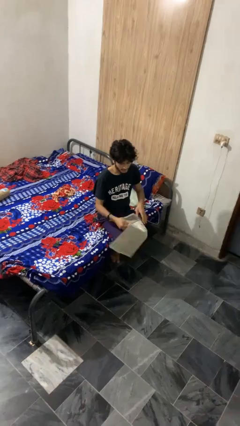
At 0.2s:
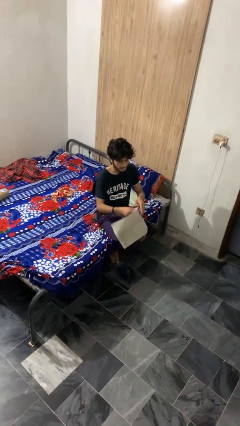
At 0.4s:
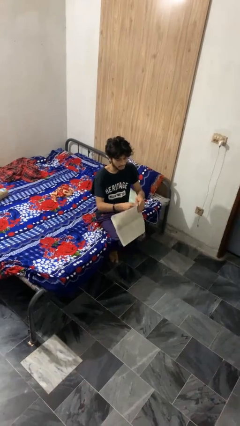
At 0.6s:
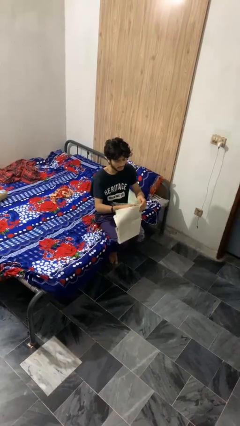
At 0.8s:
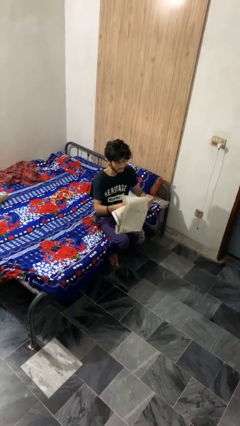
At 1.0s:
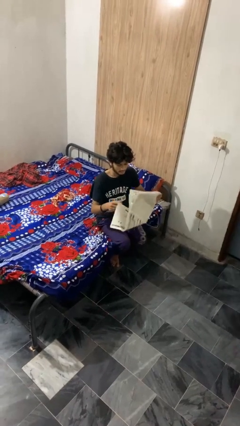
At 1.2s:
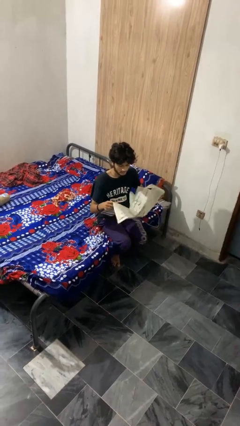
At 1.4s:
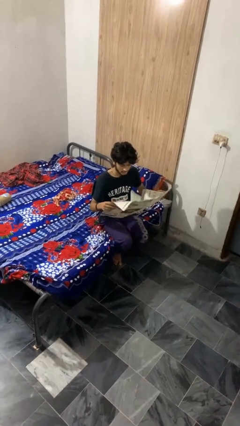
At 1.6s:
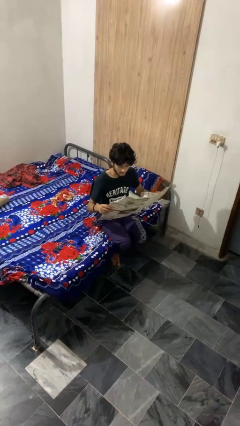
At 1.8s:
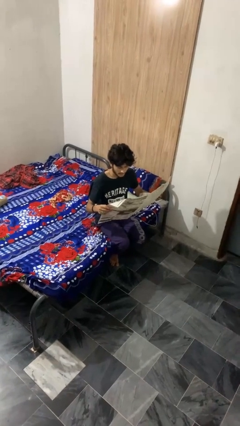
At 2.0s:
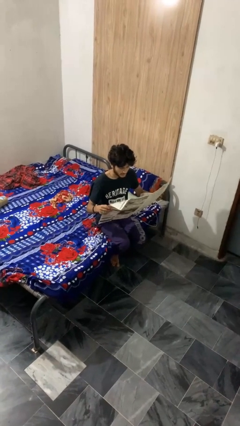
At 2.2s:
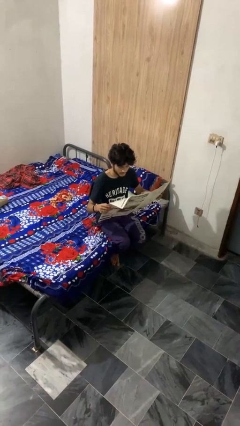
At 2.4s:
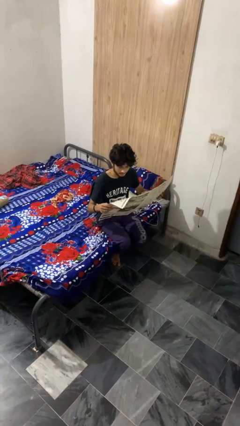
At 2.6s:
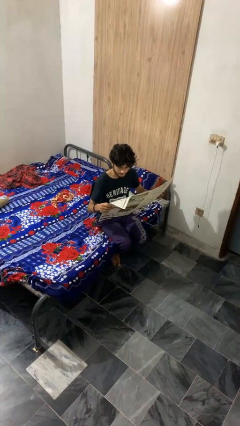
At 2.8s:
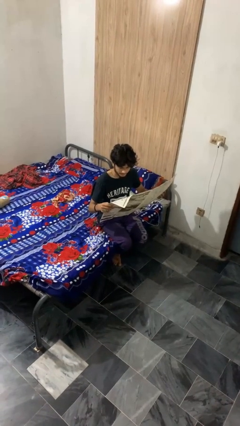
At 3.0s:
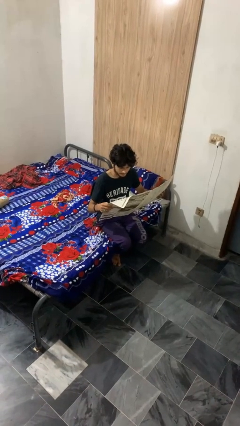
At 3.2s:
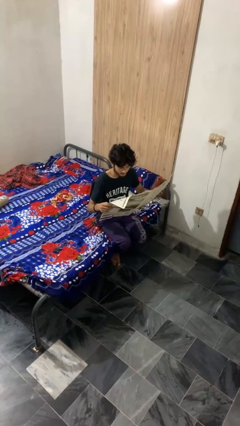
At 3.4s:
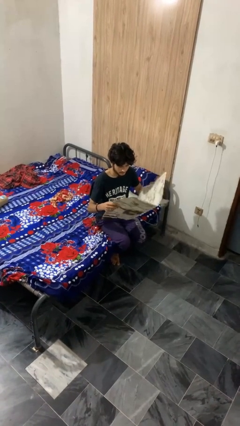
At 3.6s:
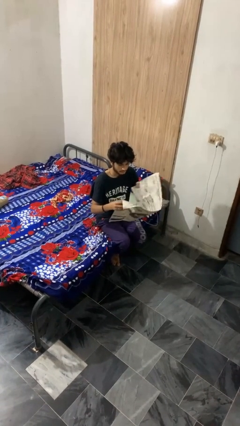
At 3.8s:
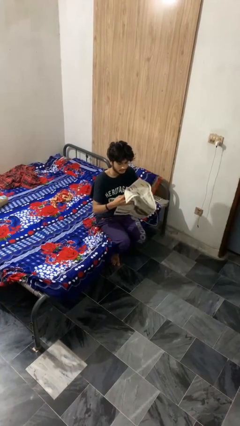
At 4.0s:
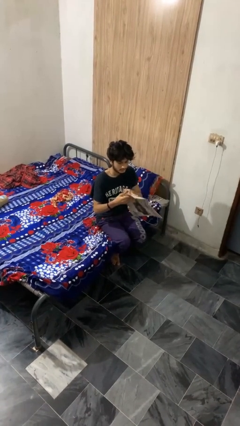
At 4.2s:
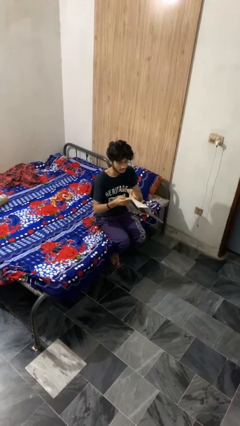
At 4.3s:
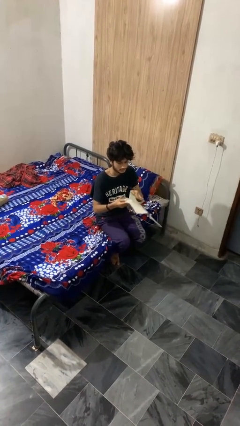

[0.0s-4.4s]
person reads newspaper

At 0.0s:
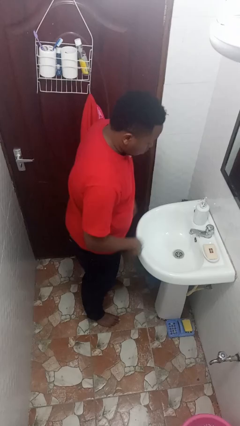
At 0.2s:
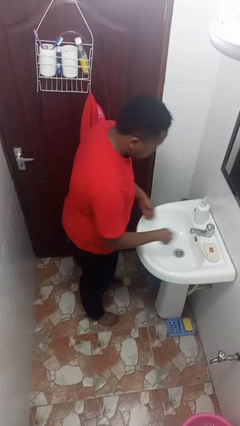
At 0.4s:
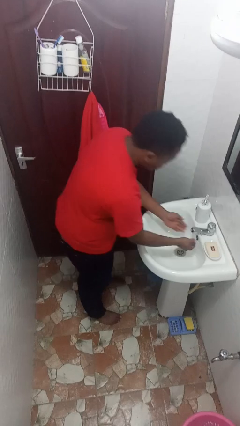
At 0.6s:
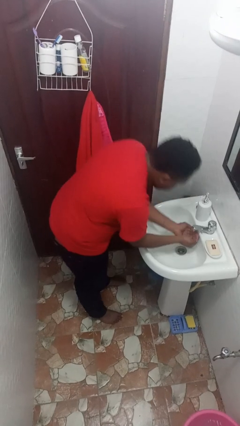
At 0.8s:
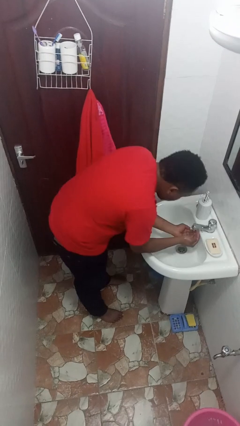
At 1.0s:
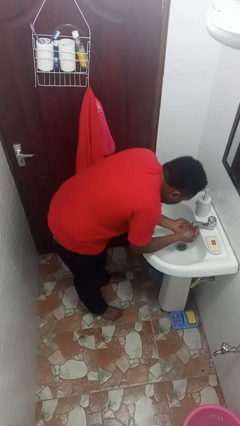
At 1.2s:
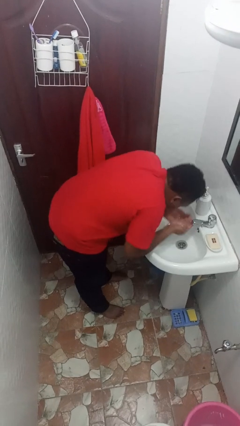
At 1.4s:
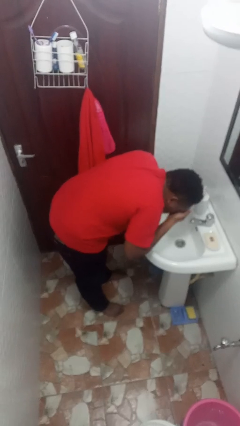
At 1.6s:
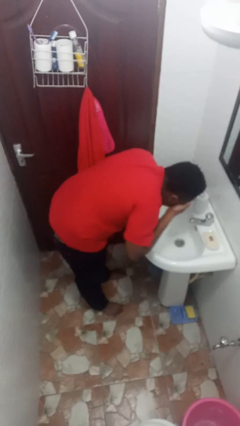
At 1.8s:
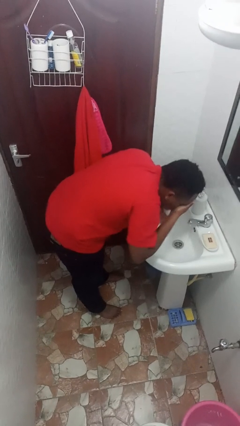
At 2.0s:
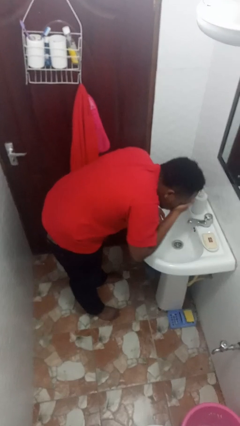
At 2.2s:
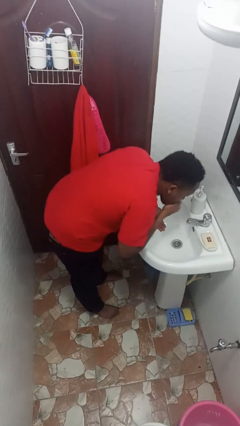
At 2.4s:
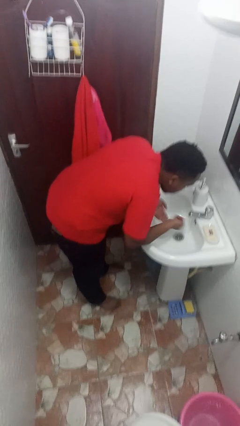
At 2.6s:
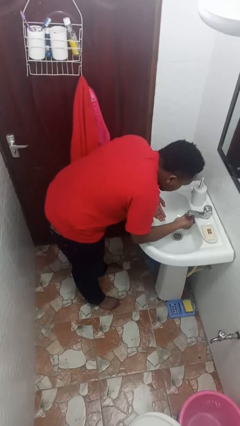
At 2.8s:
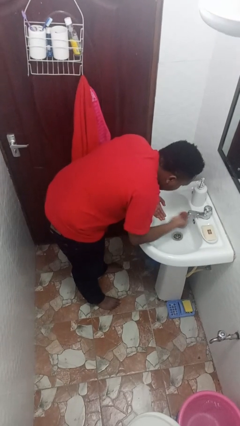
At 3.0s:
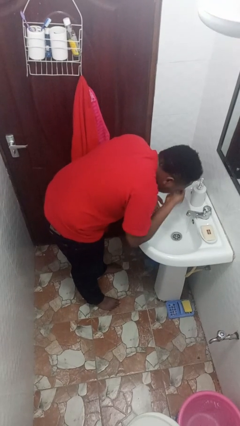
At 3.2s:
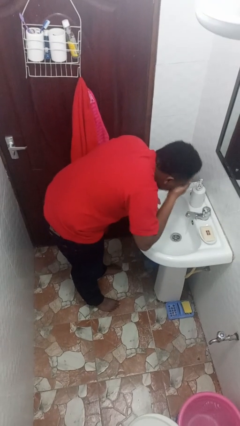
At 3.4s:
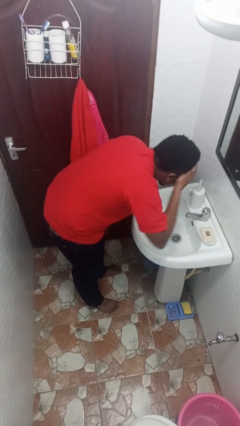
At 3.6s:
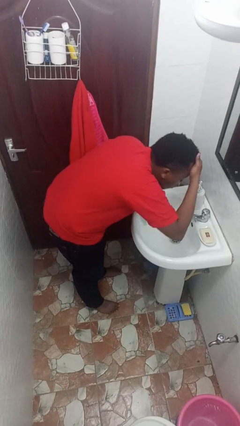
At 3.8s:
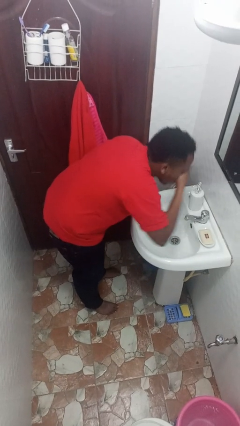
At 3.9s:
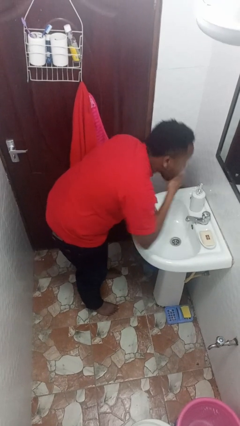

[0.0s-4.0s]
person washes face

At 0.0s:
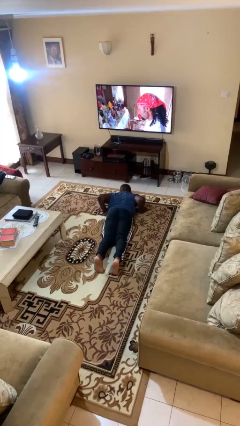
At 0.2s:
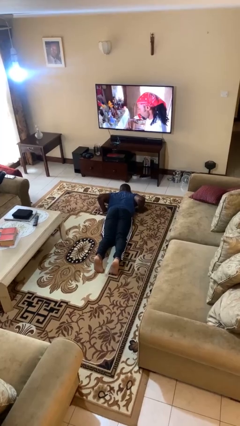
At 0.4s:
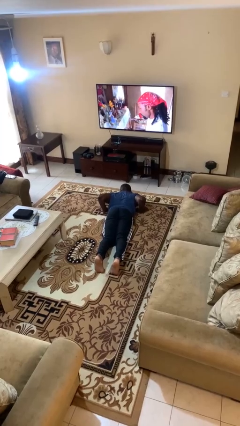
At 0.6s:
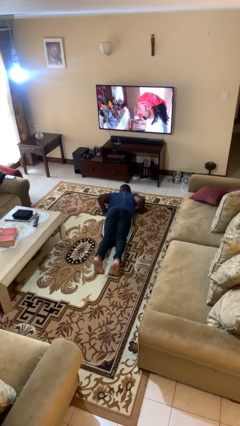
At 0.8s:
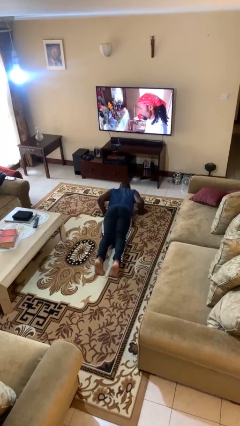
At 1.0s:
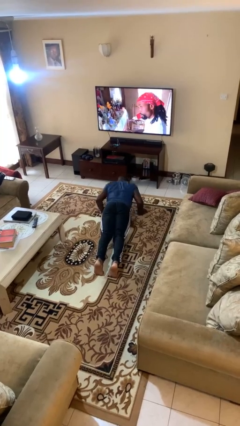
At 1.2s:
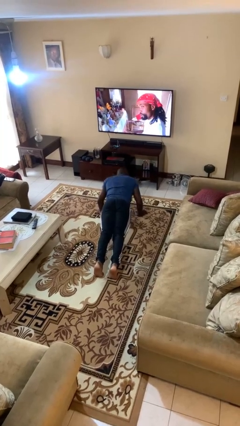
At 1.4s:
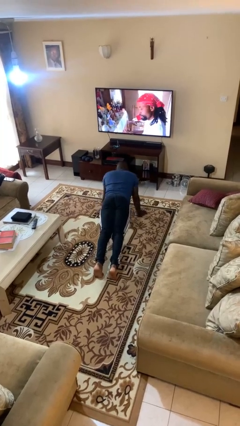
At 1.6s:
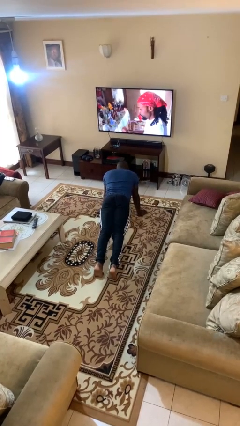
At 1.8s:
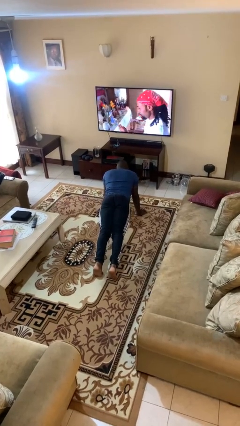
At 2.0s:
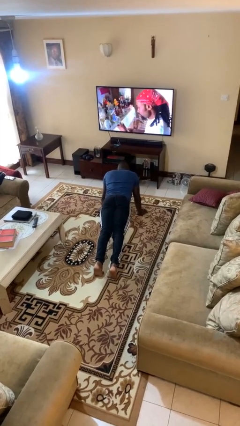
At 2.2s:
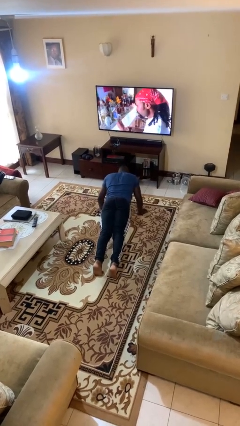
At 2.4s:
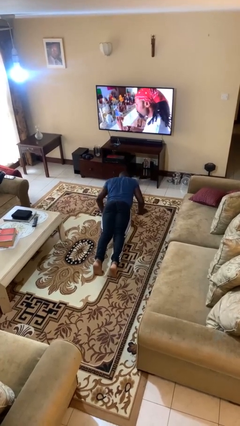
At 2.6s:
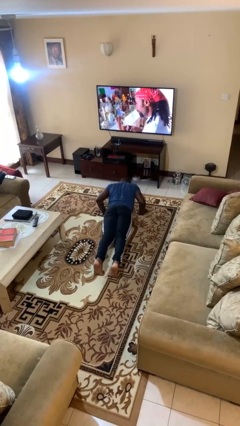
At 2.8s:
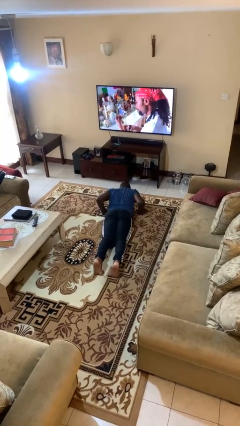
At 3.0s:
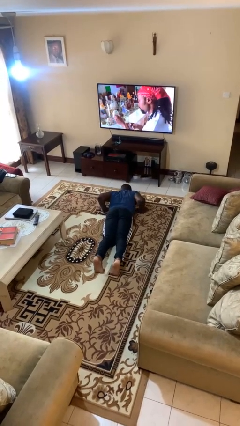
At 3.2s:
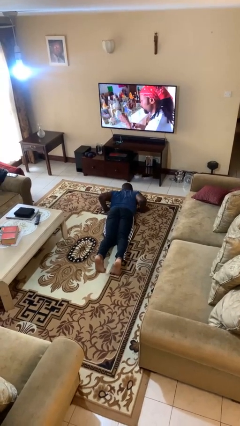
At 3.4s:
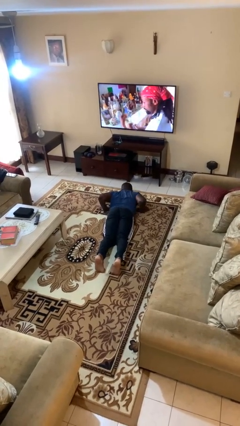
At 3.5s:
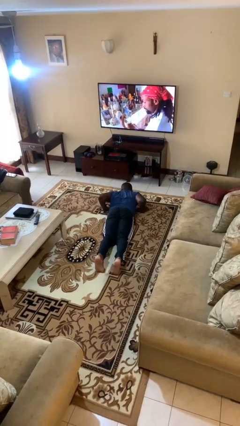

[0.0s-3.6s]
person exercises with pushup

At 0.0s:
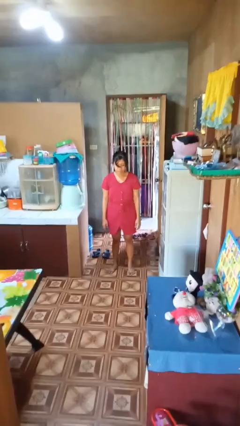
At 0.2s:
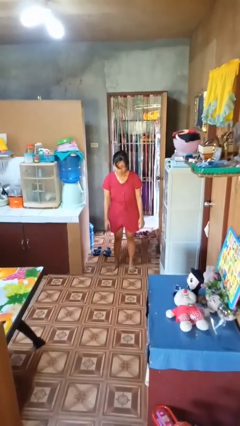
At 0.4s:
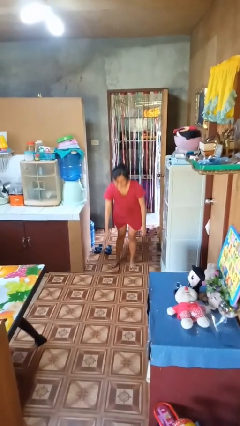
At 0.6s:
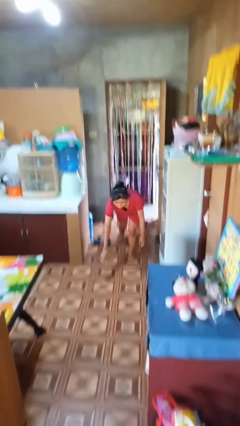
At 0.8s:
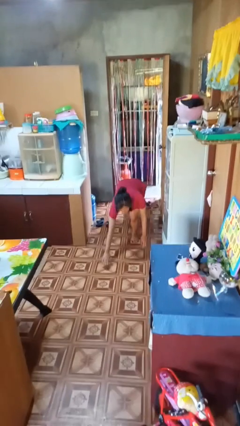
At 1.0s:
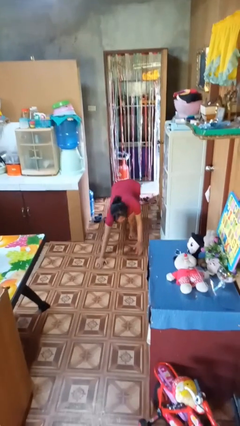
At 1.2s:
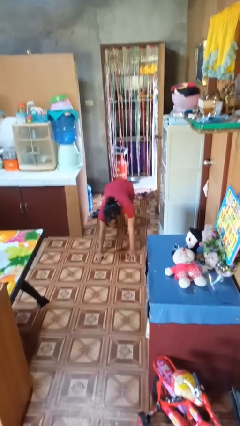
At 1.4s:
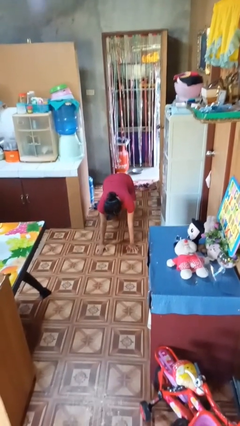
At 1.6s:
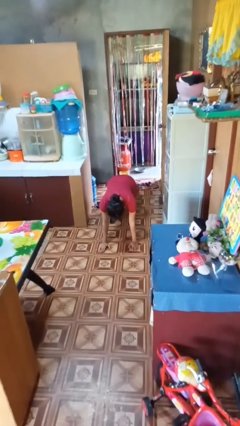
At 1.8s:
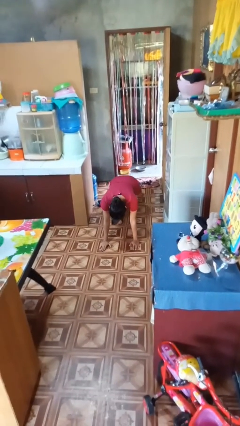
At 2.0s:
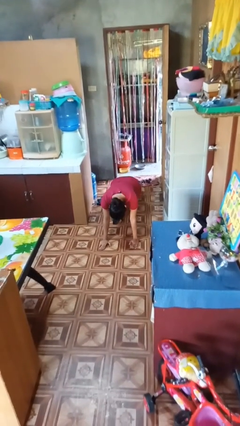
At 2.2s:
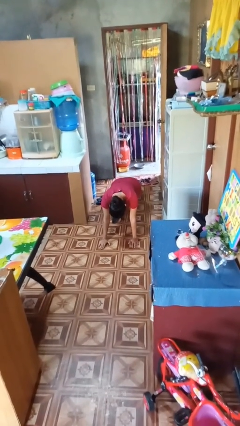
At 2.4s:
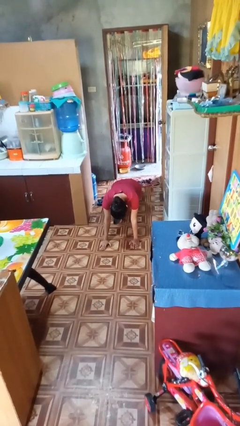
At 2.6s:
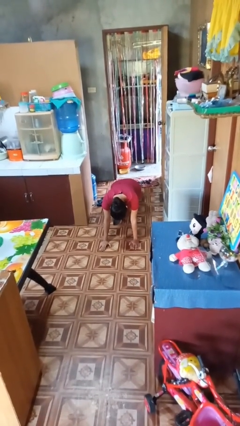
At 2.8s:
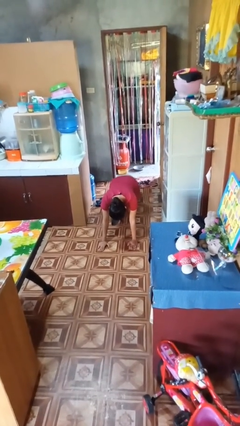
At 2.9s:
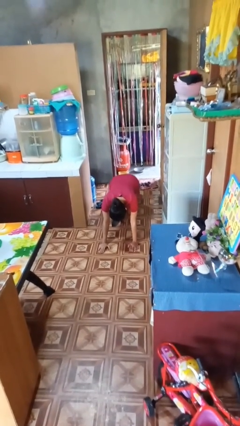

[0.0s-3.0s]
person exercises with plank

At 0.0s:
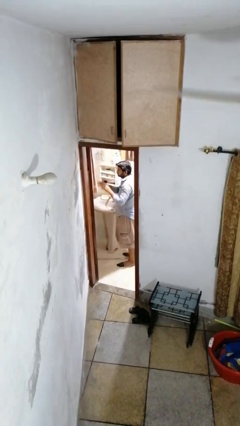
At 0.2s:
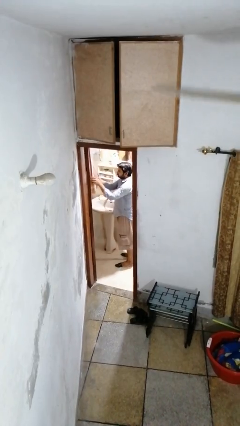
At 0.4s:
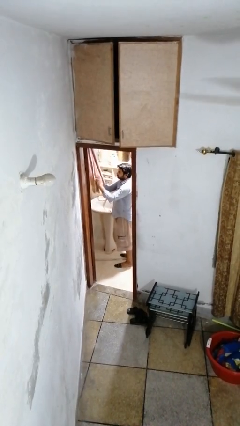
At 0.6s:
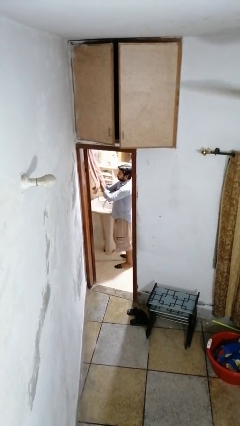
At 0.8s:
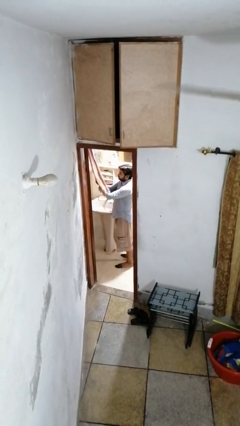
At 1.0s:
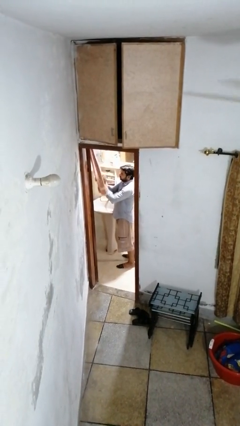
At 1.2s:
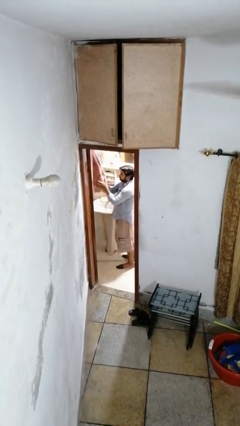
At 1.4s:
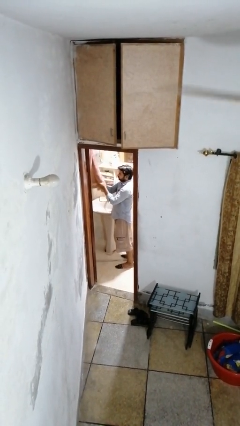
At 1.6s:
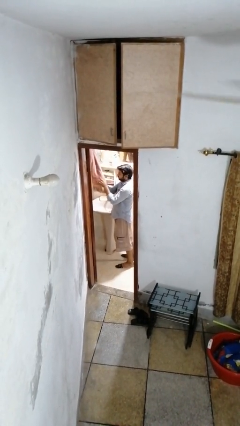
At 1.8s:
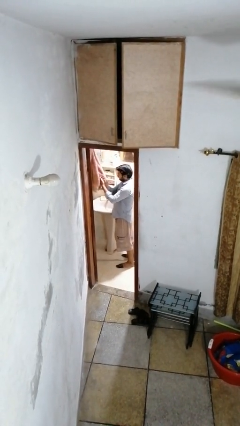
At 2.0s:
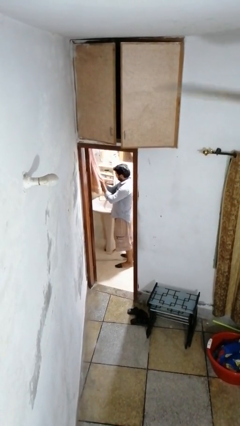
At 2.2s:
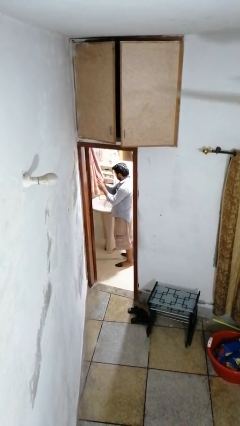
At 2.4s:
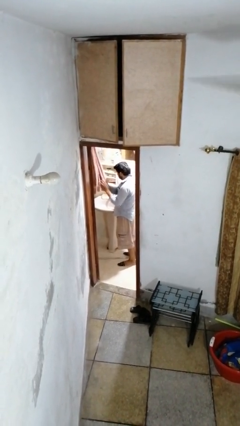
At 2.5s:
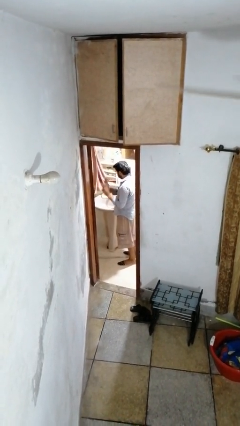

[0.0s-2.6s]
person dries hands with towel
